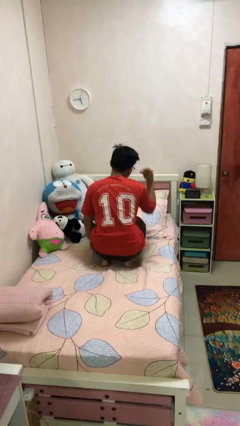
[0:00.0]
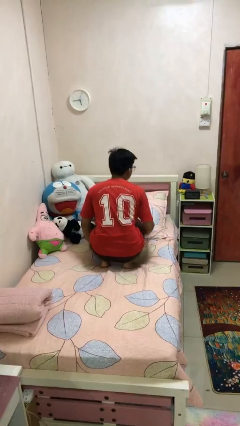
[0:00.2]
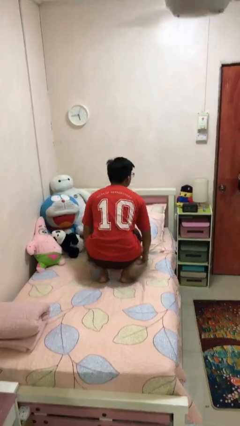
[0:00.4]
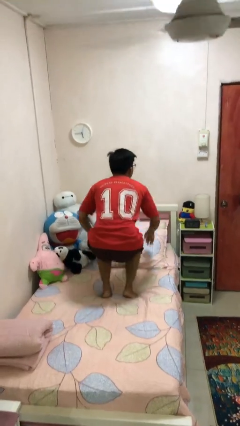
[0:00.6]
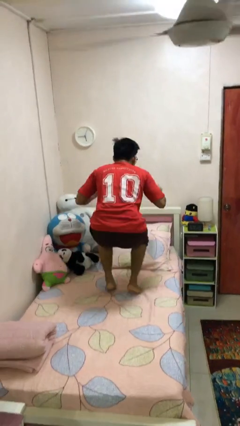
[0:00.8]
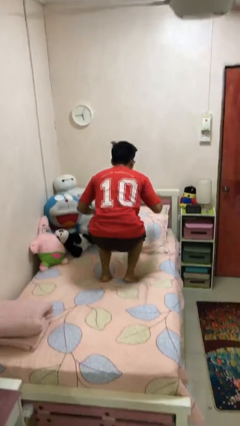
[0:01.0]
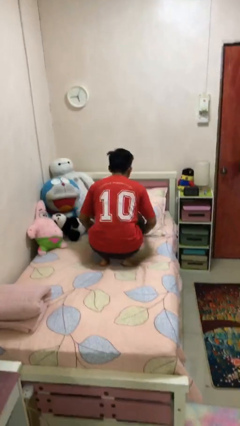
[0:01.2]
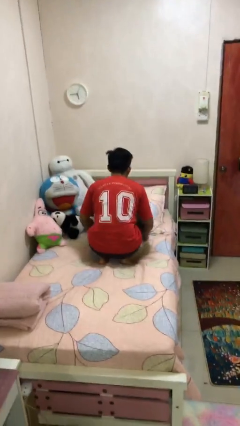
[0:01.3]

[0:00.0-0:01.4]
person jumps on bed

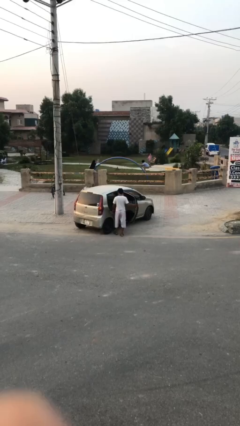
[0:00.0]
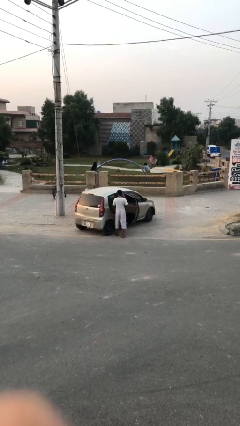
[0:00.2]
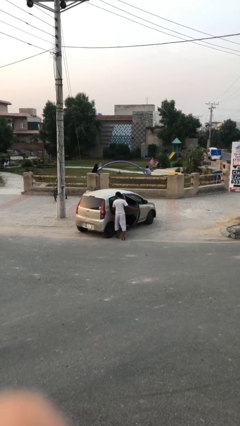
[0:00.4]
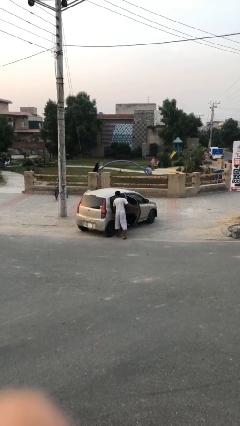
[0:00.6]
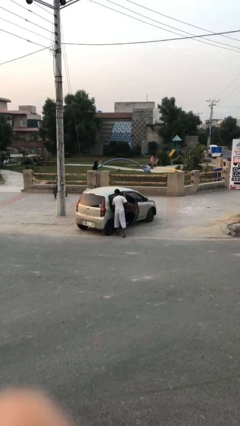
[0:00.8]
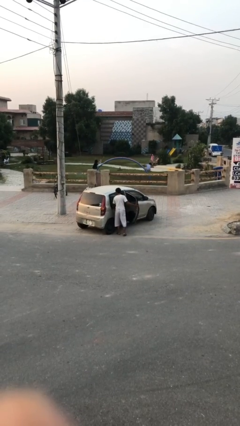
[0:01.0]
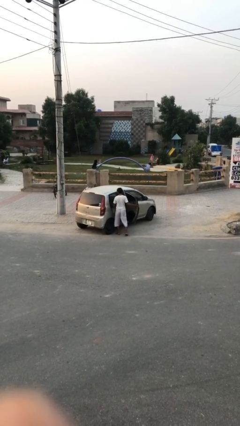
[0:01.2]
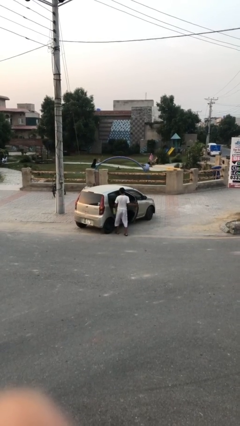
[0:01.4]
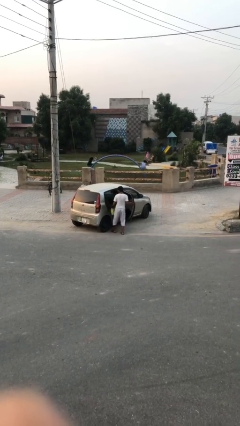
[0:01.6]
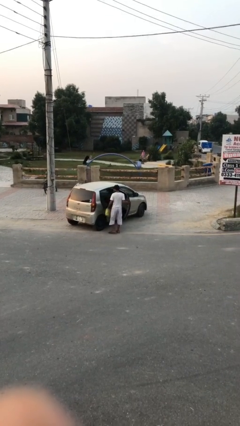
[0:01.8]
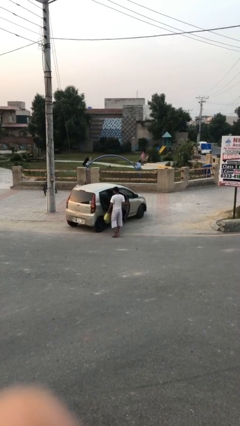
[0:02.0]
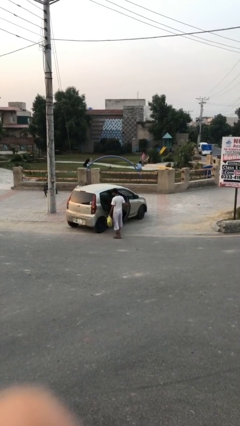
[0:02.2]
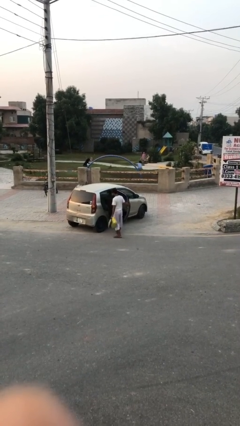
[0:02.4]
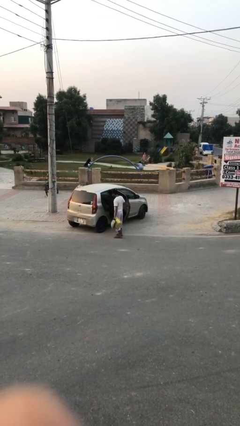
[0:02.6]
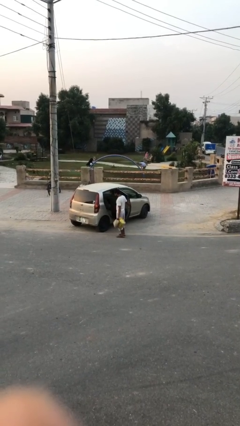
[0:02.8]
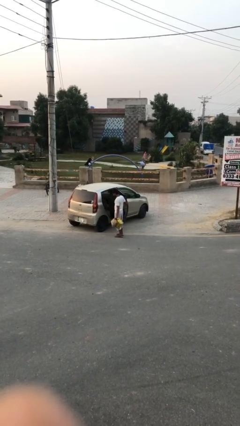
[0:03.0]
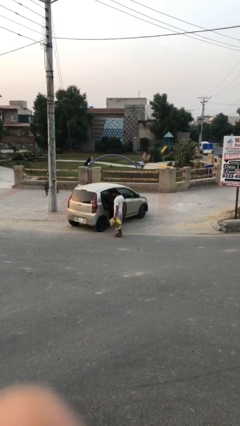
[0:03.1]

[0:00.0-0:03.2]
person unloads car

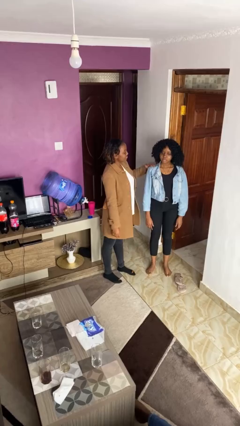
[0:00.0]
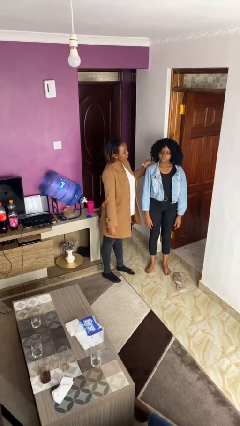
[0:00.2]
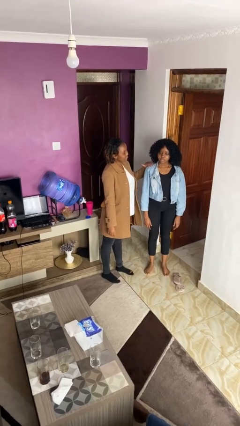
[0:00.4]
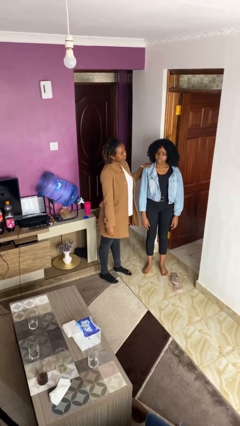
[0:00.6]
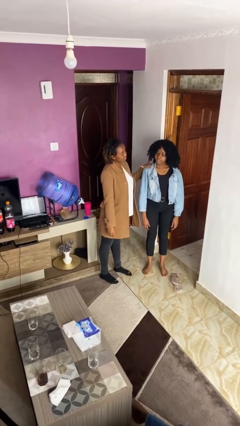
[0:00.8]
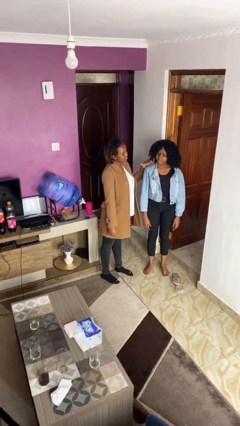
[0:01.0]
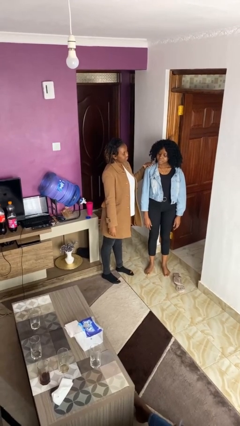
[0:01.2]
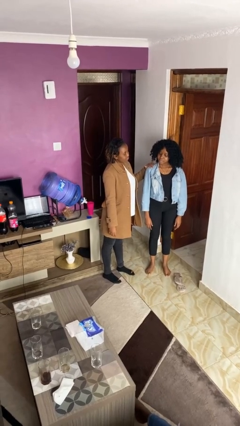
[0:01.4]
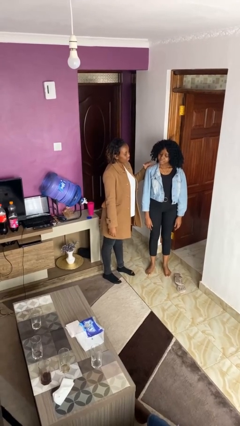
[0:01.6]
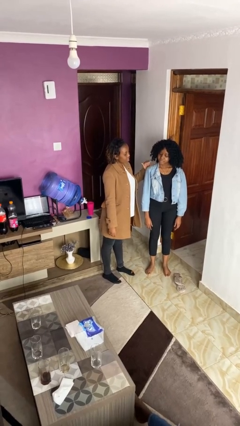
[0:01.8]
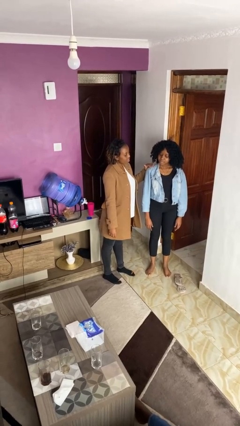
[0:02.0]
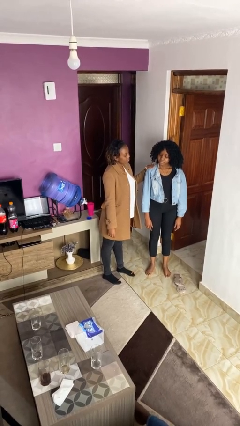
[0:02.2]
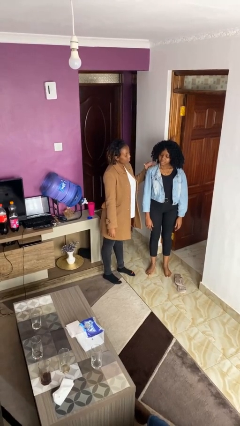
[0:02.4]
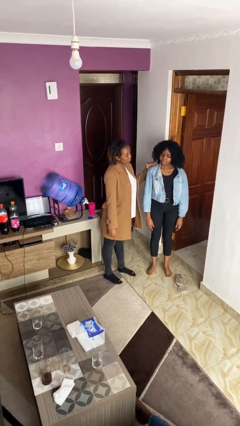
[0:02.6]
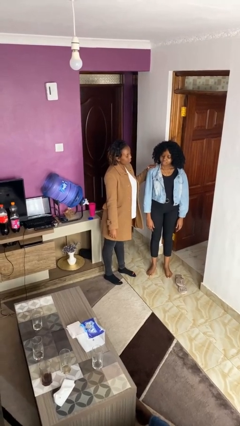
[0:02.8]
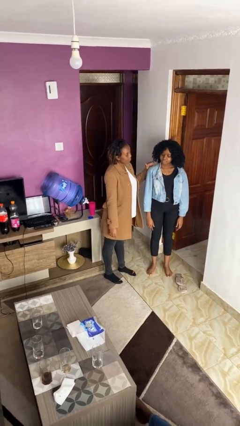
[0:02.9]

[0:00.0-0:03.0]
person pounds shoulders of person

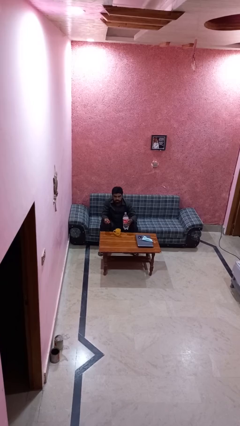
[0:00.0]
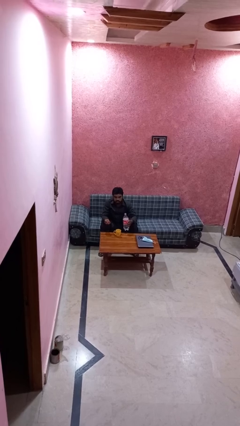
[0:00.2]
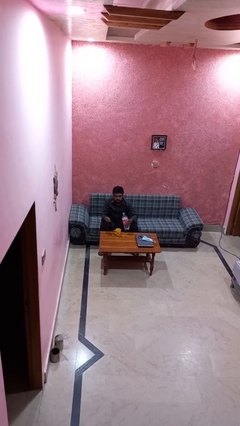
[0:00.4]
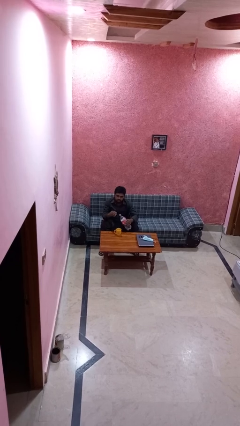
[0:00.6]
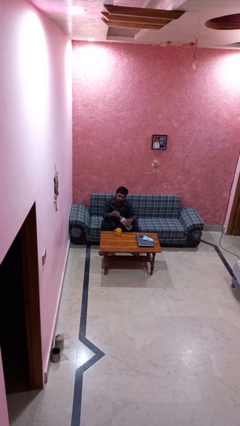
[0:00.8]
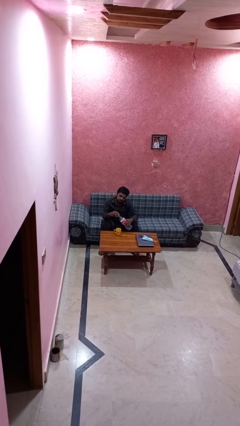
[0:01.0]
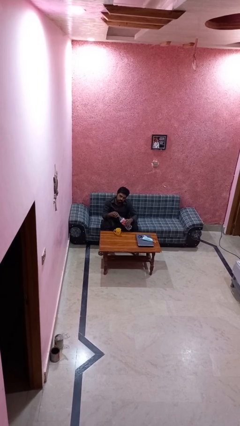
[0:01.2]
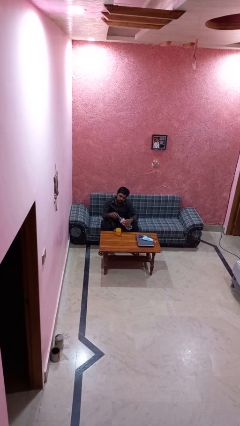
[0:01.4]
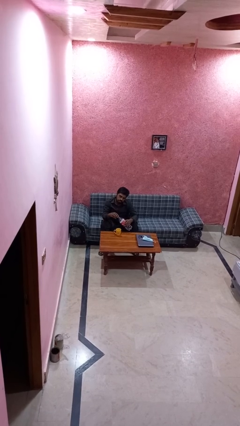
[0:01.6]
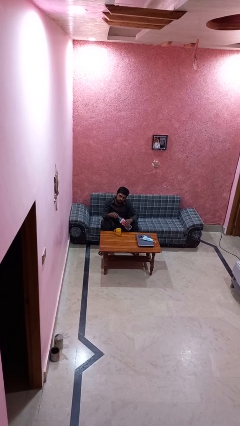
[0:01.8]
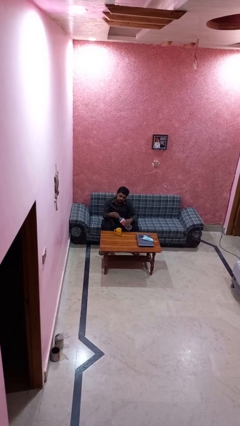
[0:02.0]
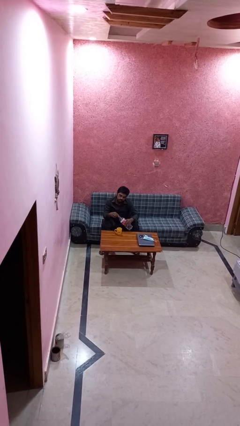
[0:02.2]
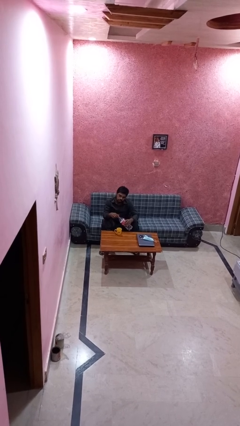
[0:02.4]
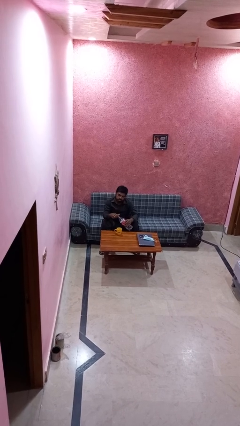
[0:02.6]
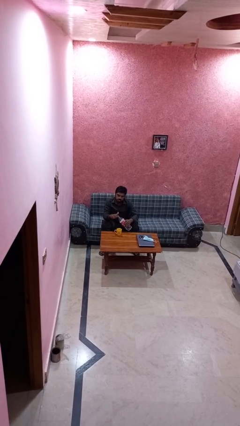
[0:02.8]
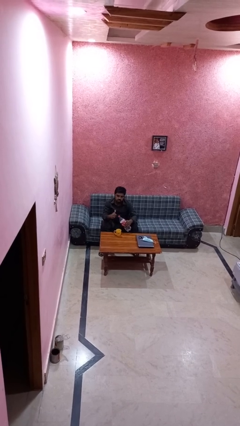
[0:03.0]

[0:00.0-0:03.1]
person screws lid to bottle

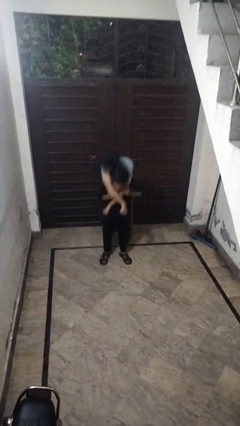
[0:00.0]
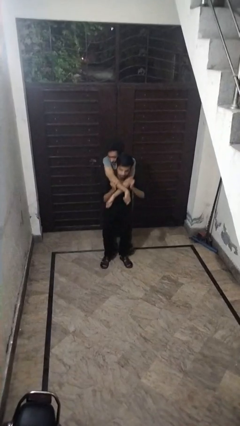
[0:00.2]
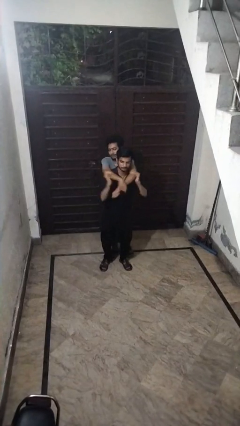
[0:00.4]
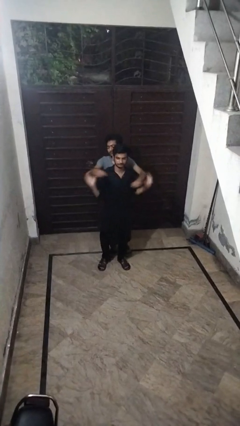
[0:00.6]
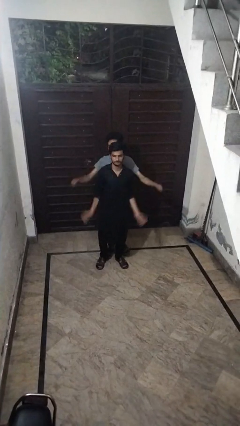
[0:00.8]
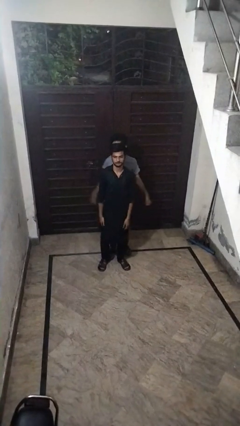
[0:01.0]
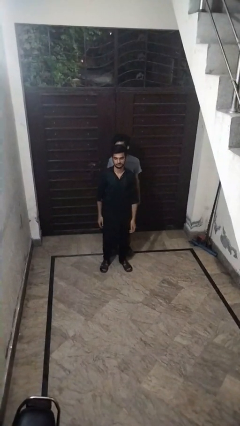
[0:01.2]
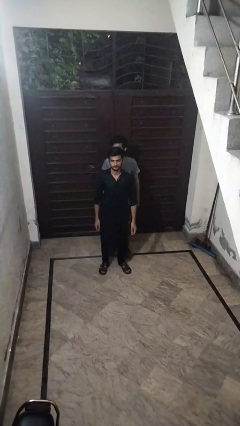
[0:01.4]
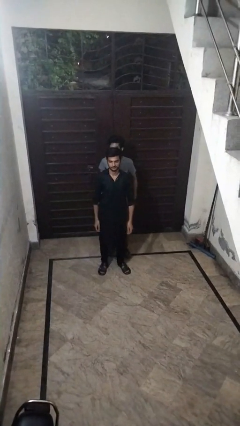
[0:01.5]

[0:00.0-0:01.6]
person puts down person

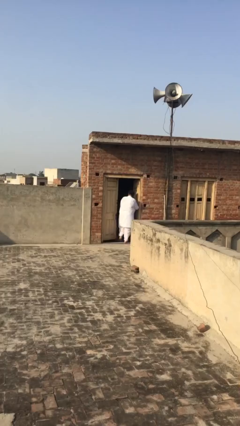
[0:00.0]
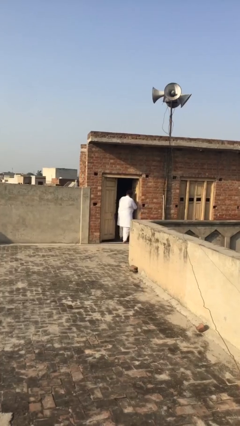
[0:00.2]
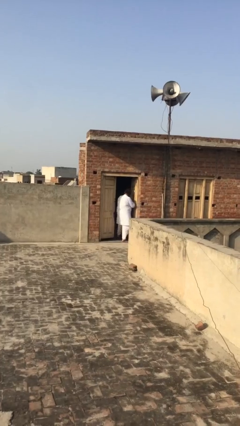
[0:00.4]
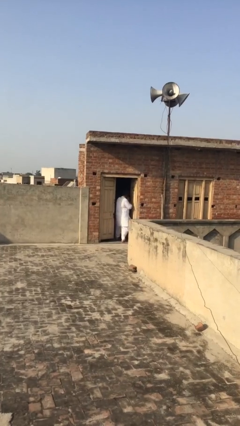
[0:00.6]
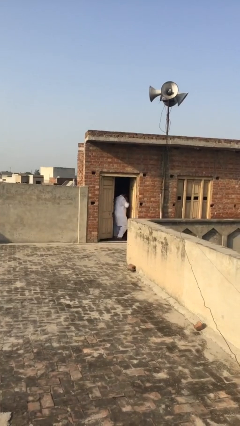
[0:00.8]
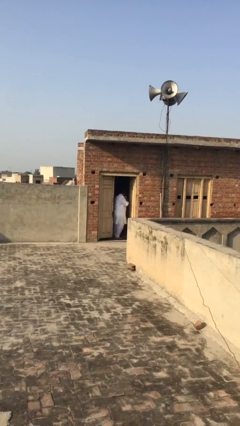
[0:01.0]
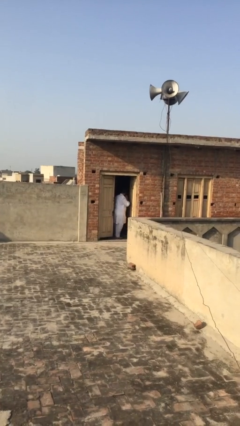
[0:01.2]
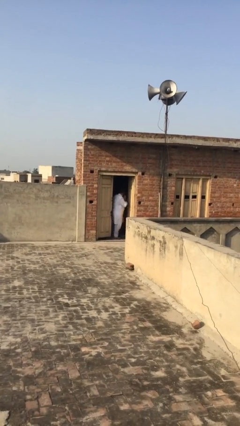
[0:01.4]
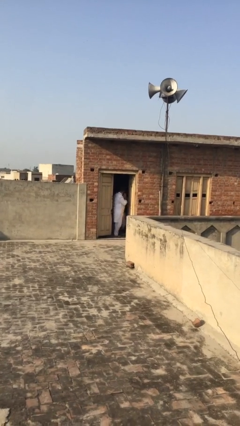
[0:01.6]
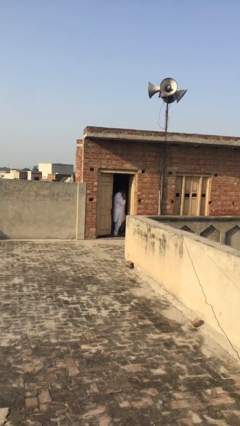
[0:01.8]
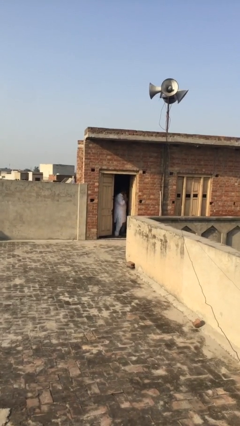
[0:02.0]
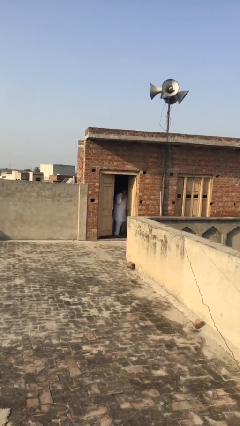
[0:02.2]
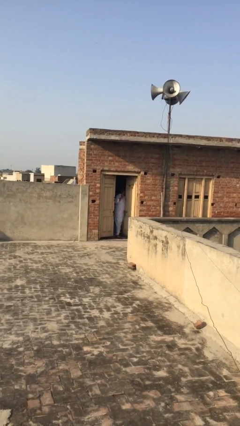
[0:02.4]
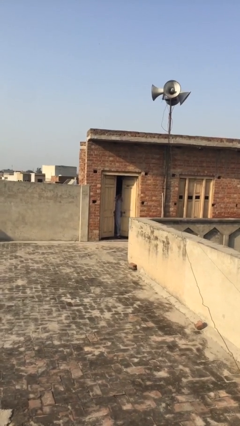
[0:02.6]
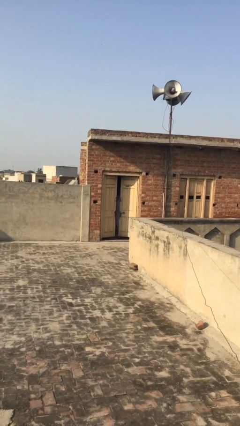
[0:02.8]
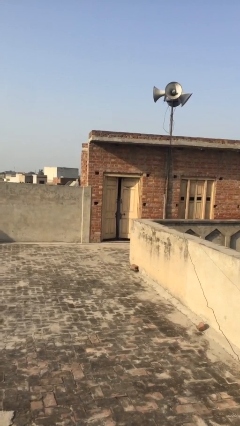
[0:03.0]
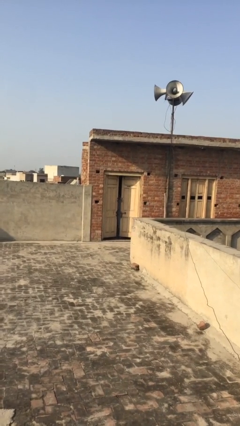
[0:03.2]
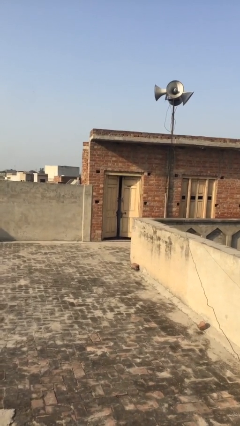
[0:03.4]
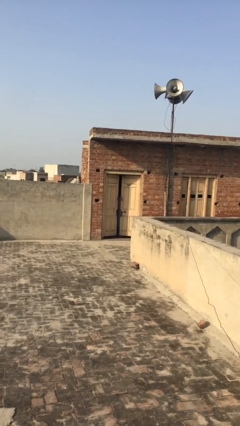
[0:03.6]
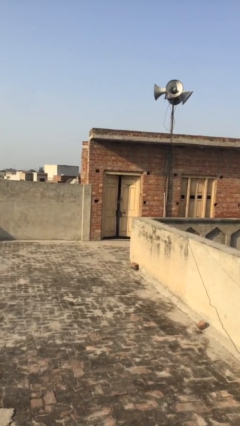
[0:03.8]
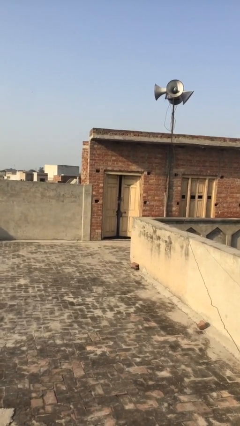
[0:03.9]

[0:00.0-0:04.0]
person closes facility door

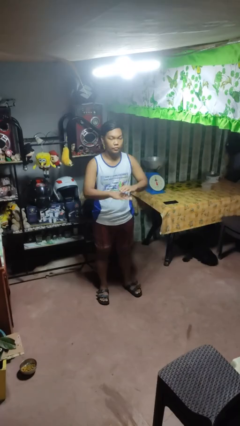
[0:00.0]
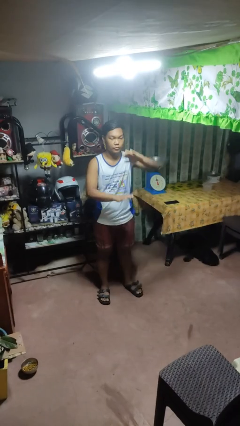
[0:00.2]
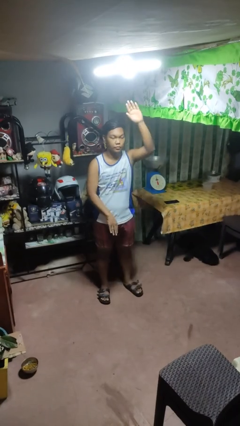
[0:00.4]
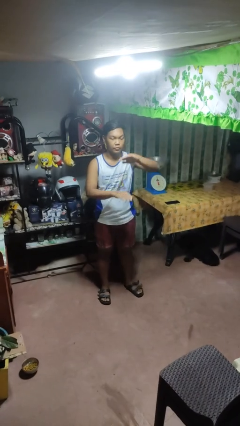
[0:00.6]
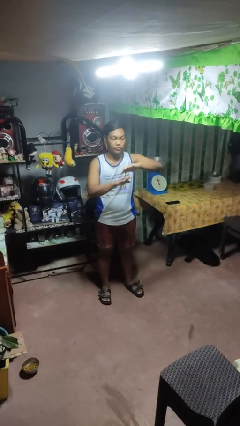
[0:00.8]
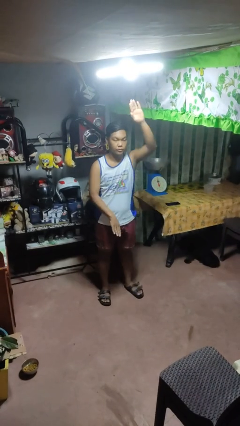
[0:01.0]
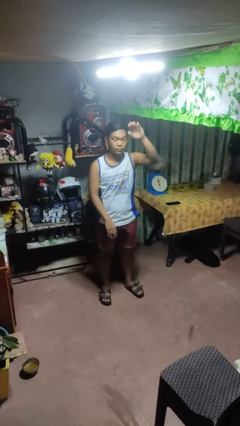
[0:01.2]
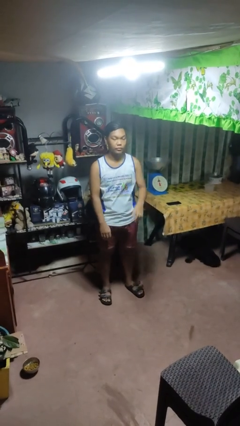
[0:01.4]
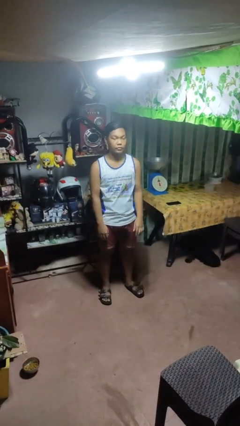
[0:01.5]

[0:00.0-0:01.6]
person gestures zoom in
